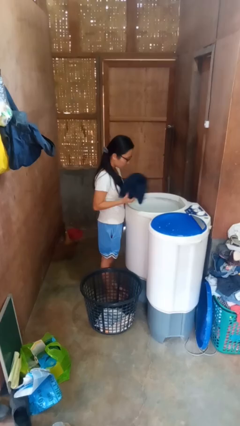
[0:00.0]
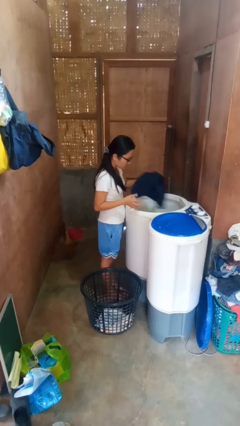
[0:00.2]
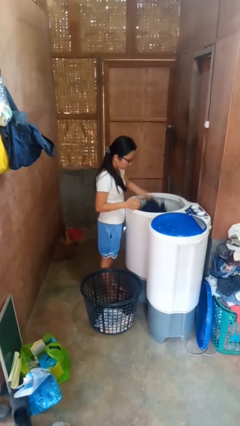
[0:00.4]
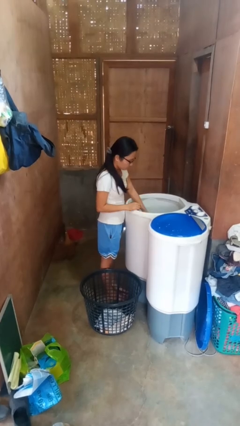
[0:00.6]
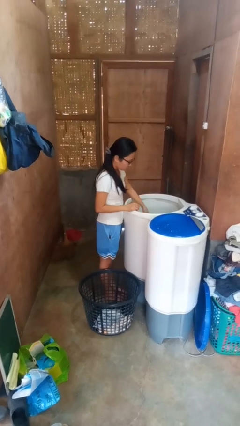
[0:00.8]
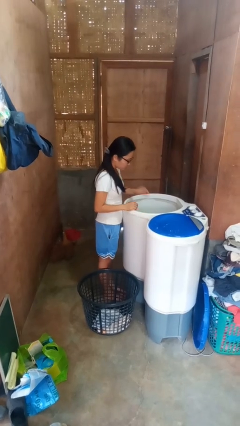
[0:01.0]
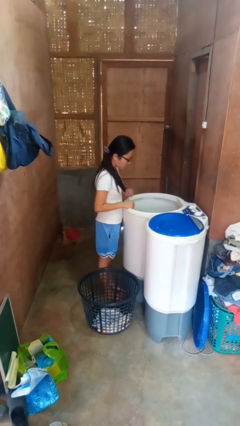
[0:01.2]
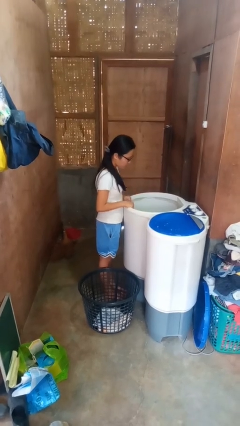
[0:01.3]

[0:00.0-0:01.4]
person loads clotheswasher

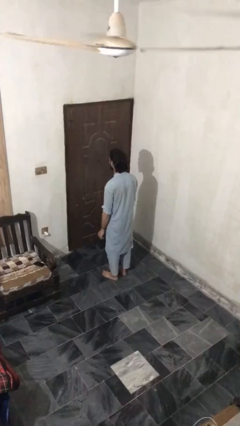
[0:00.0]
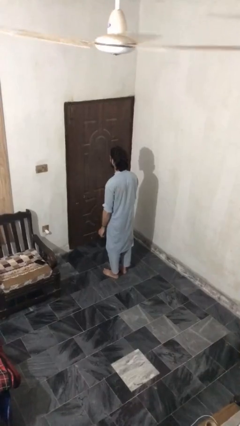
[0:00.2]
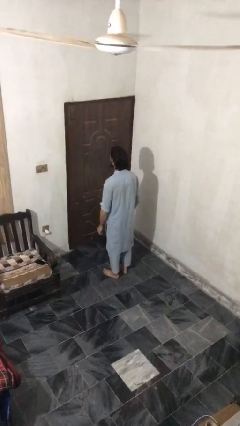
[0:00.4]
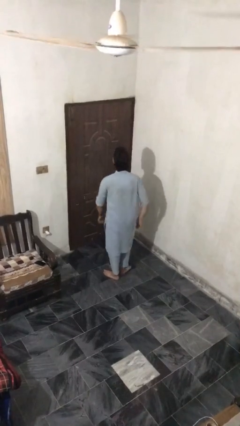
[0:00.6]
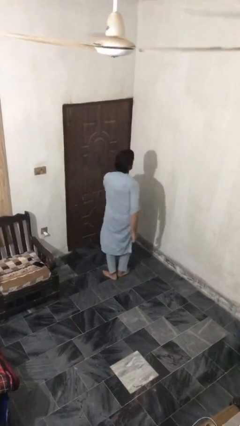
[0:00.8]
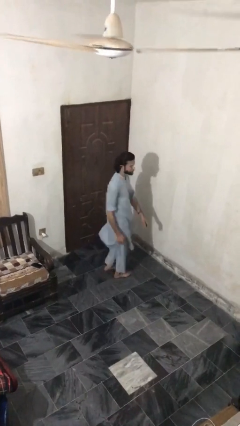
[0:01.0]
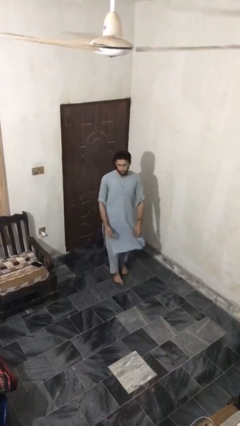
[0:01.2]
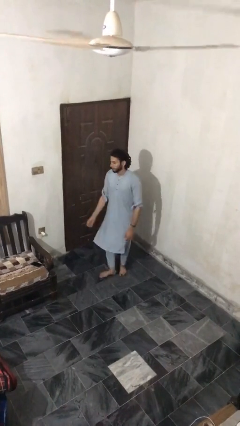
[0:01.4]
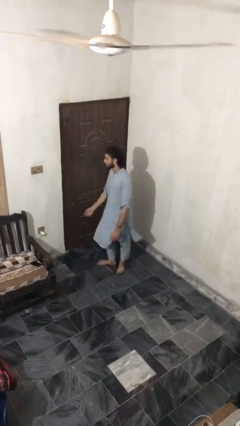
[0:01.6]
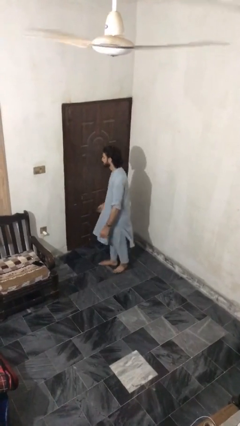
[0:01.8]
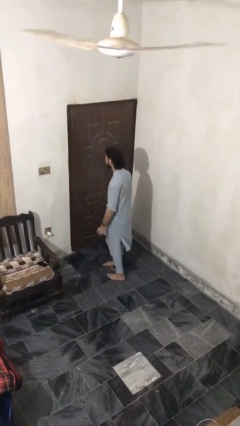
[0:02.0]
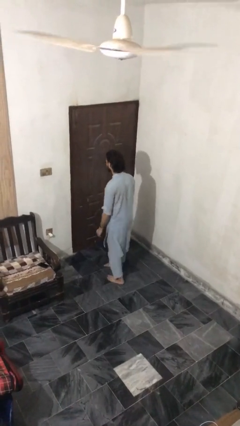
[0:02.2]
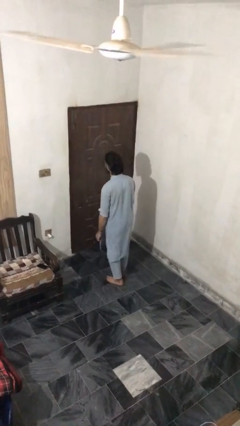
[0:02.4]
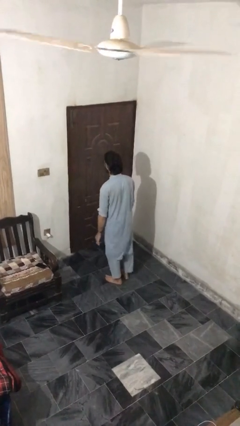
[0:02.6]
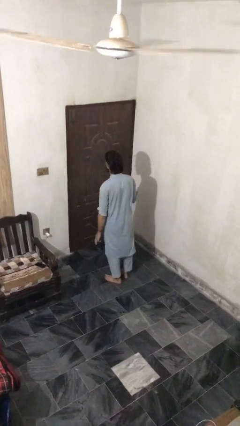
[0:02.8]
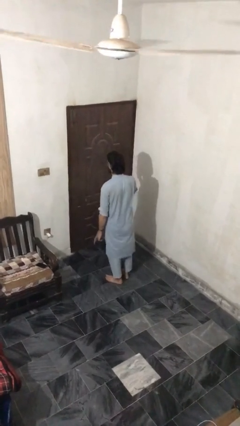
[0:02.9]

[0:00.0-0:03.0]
person twirls

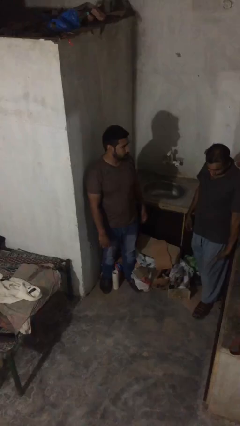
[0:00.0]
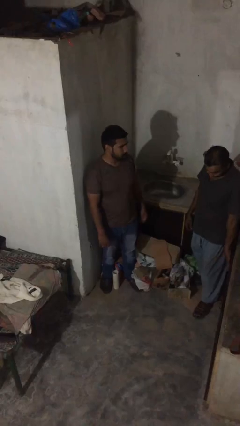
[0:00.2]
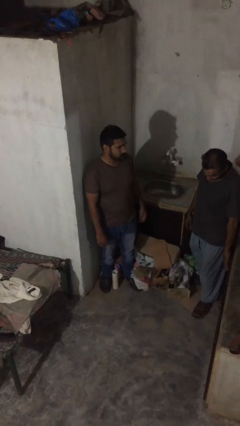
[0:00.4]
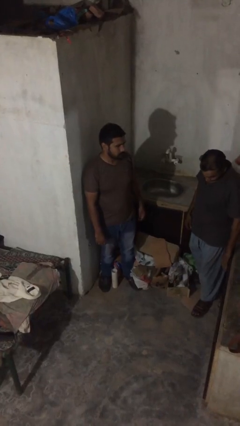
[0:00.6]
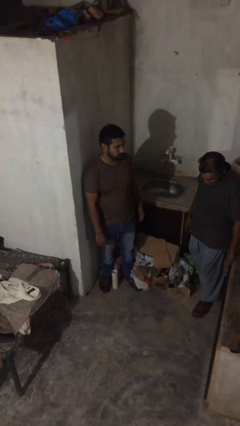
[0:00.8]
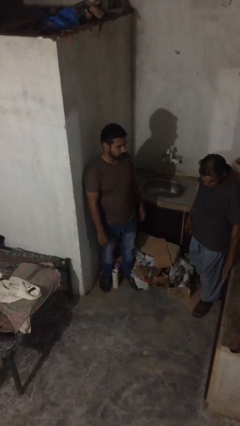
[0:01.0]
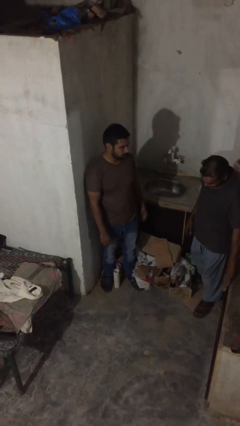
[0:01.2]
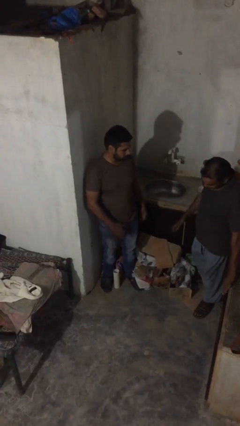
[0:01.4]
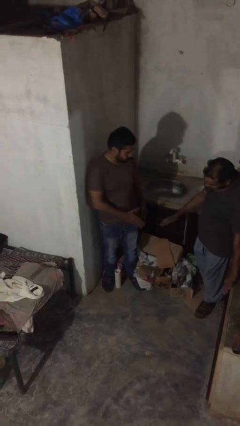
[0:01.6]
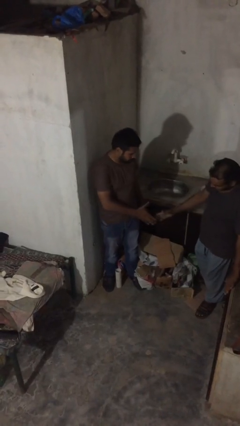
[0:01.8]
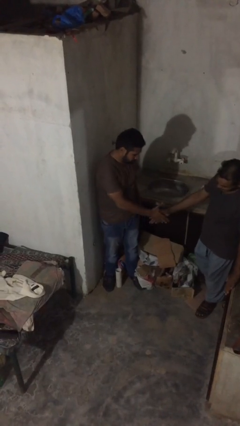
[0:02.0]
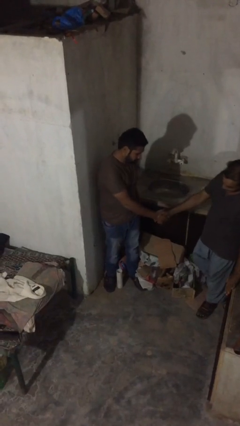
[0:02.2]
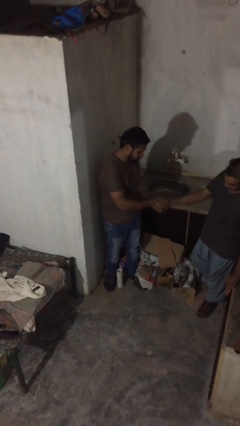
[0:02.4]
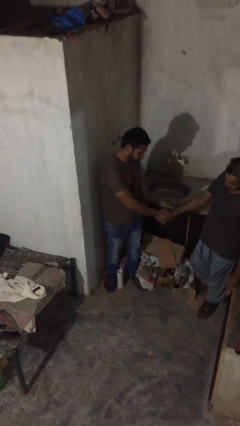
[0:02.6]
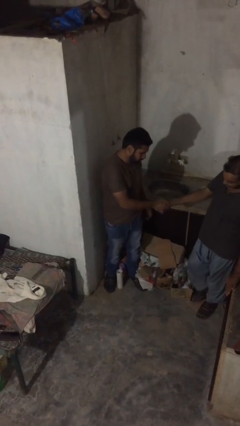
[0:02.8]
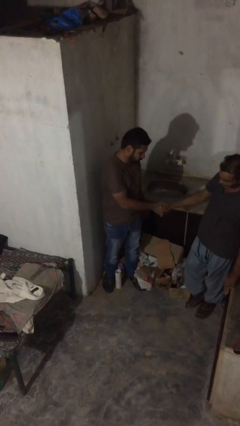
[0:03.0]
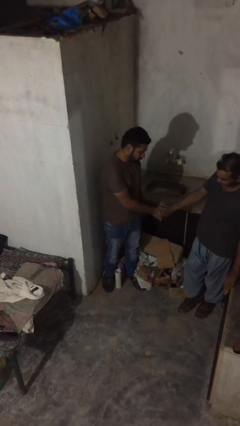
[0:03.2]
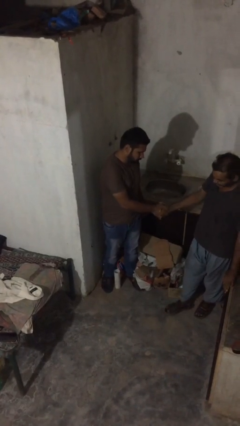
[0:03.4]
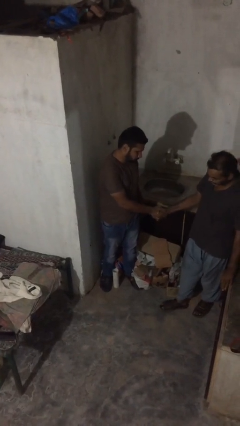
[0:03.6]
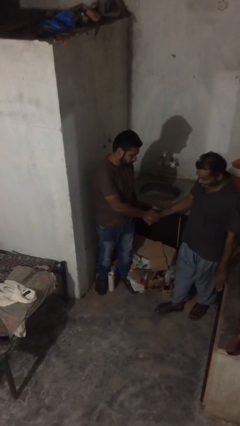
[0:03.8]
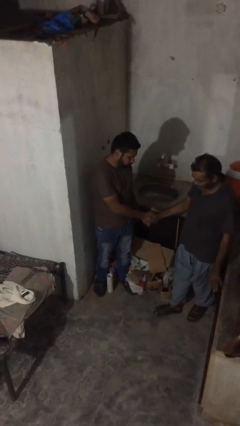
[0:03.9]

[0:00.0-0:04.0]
person shakes hand

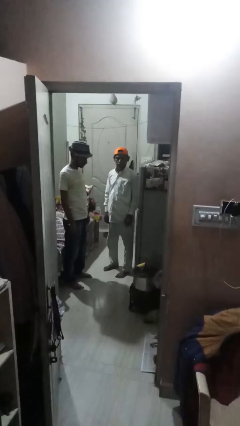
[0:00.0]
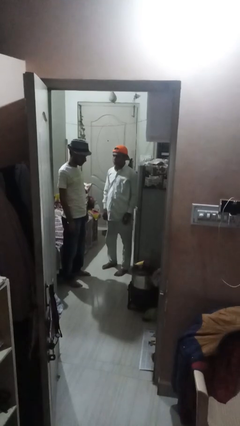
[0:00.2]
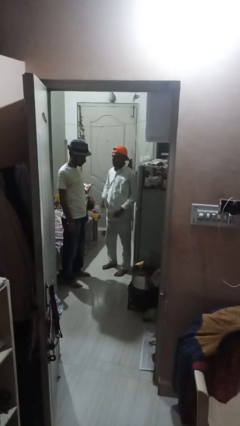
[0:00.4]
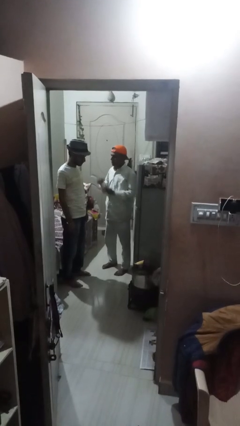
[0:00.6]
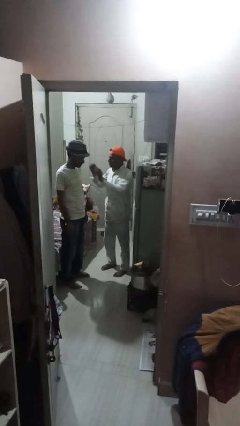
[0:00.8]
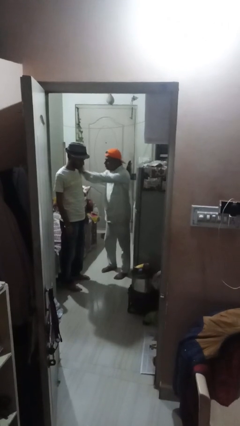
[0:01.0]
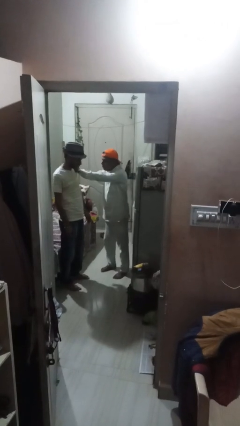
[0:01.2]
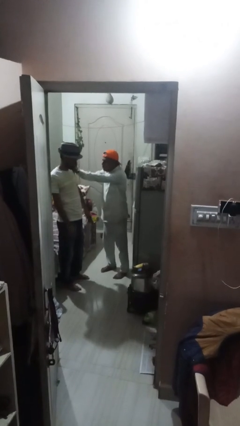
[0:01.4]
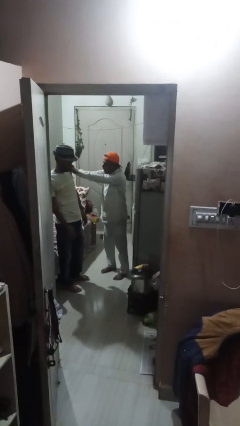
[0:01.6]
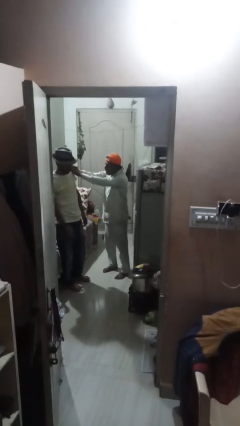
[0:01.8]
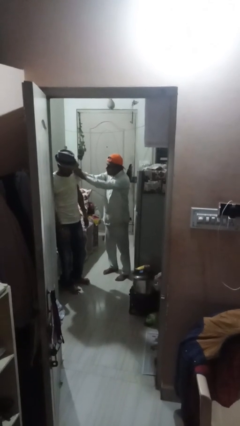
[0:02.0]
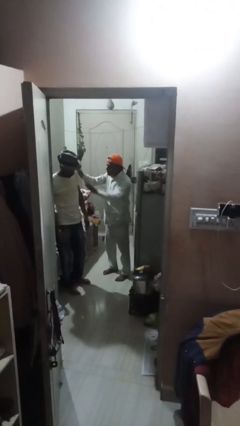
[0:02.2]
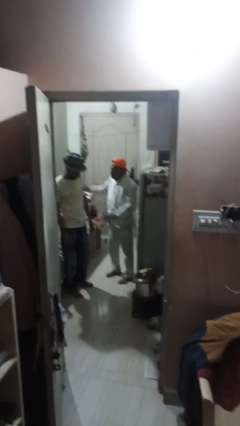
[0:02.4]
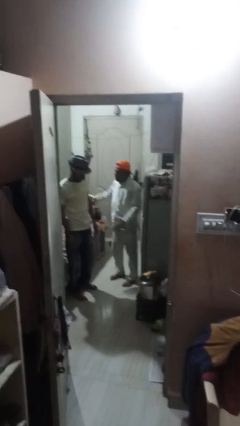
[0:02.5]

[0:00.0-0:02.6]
person shoves person

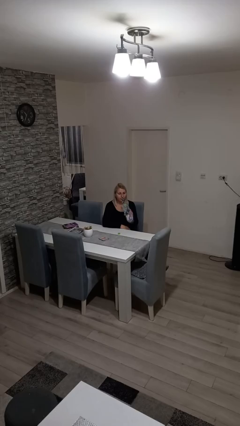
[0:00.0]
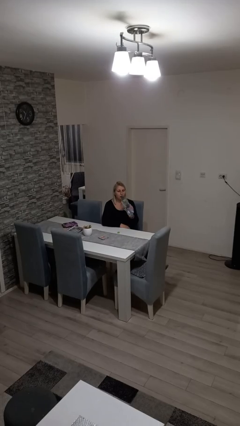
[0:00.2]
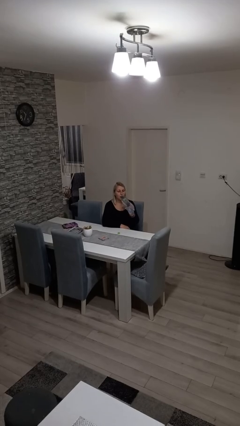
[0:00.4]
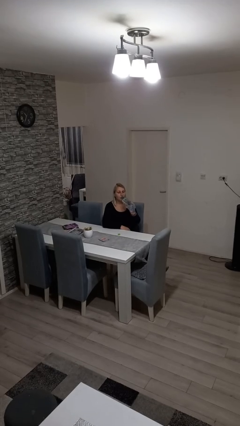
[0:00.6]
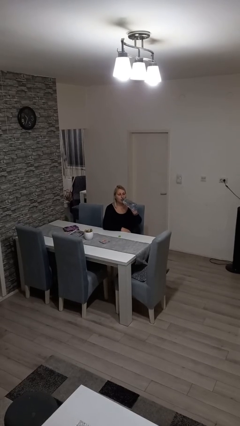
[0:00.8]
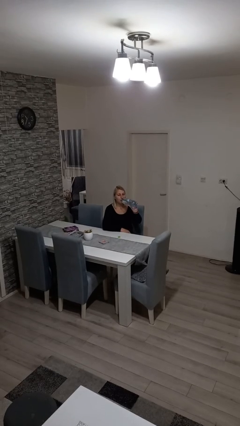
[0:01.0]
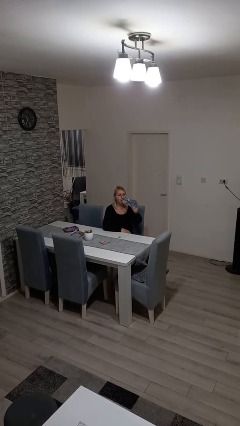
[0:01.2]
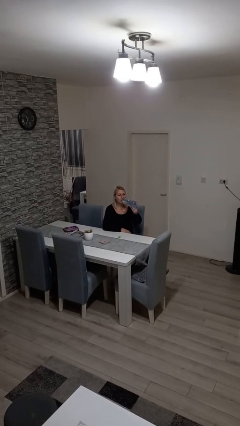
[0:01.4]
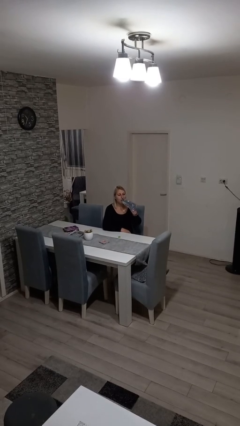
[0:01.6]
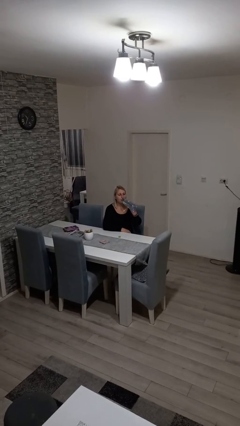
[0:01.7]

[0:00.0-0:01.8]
person drinks from bottle

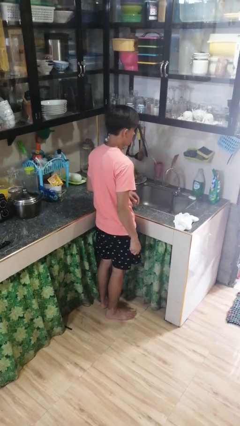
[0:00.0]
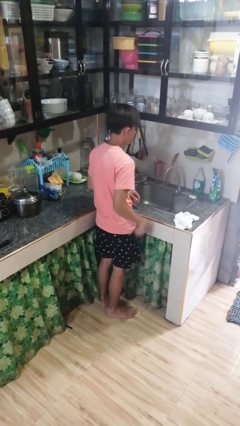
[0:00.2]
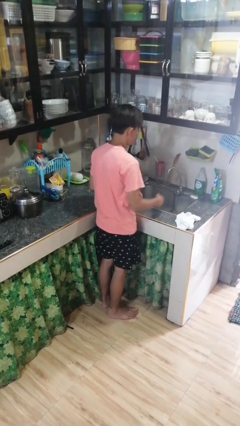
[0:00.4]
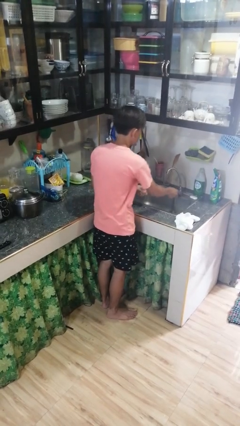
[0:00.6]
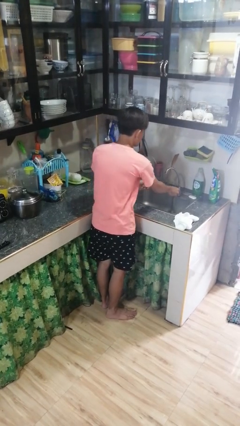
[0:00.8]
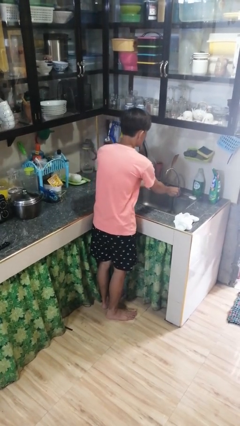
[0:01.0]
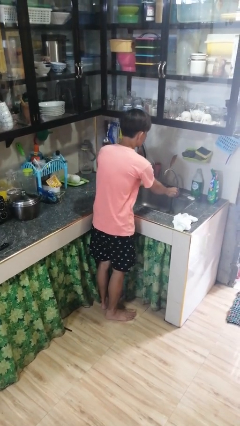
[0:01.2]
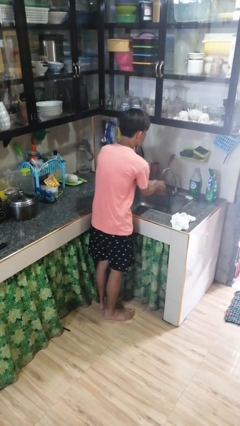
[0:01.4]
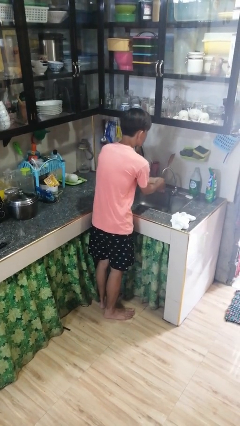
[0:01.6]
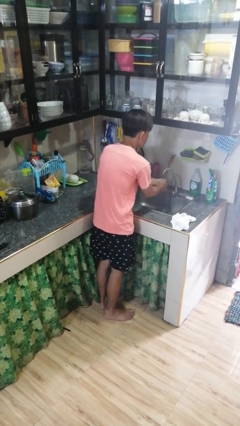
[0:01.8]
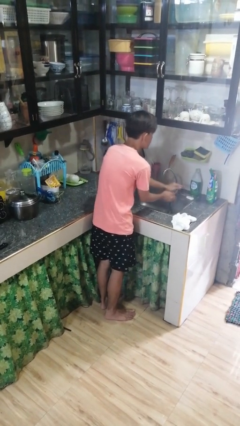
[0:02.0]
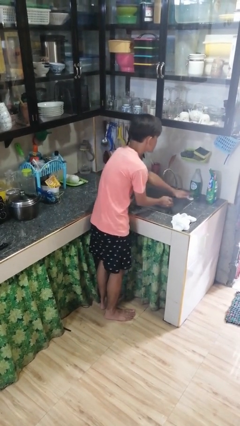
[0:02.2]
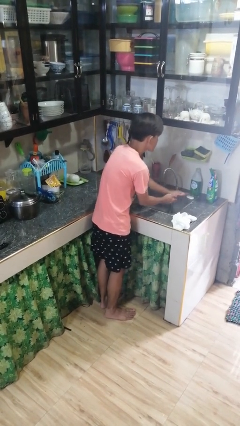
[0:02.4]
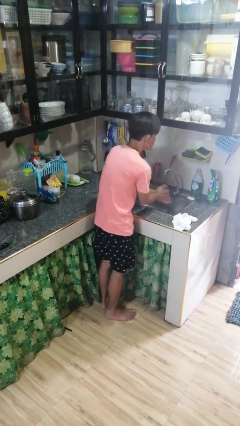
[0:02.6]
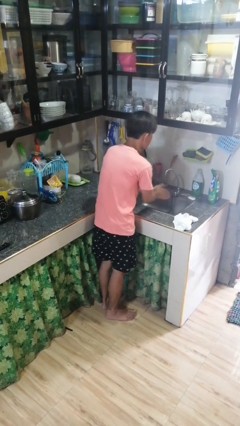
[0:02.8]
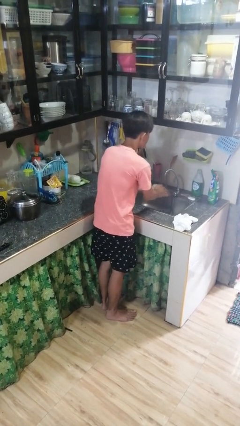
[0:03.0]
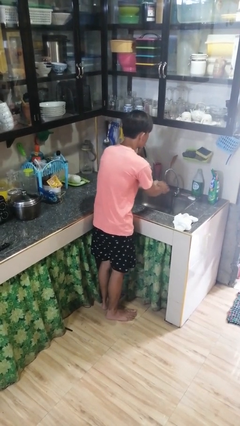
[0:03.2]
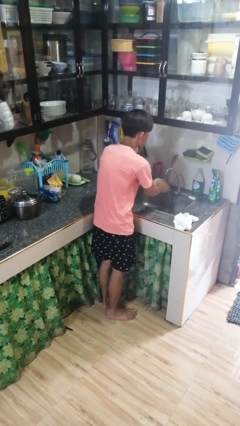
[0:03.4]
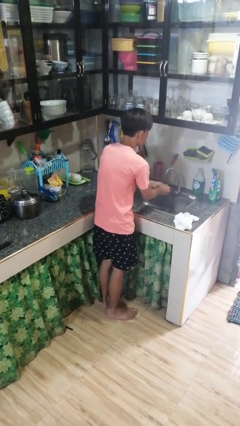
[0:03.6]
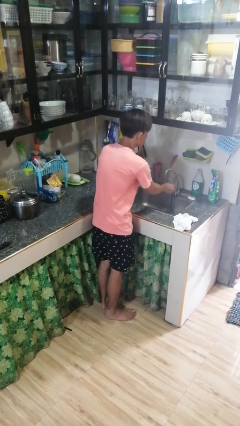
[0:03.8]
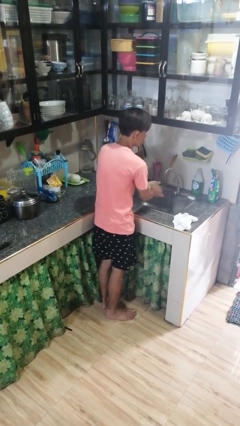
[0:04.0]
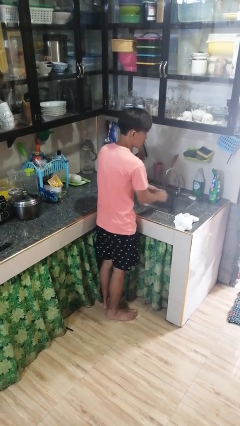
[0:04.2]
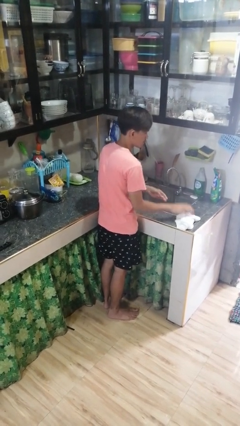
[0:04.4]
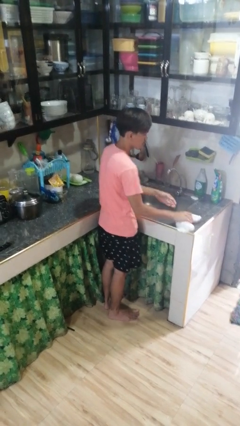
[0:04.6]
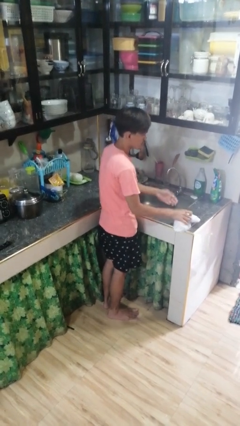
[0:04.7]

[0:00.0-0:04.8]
person washes hands
